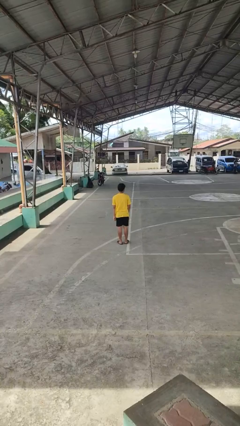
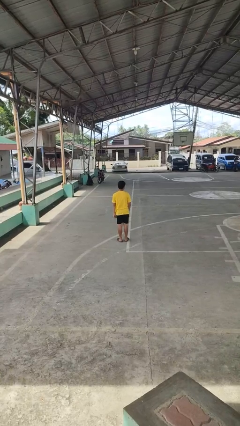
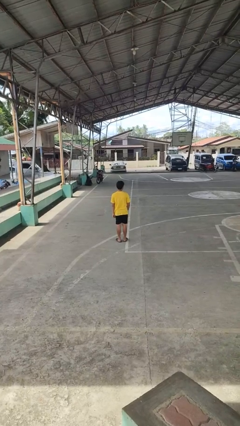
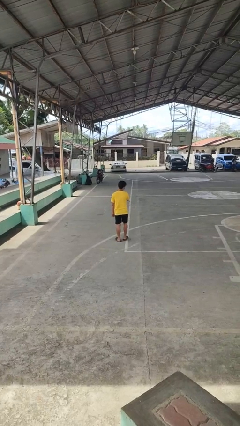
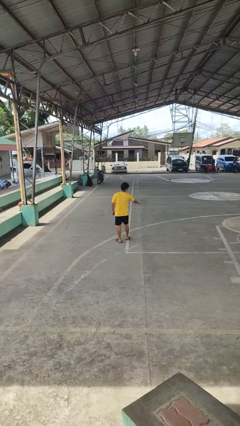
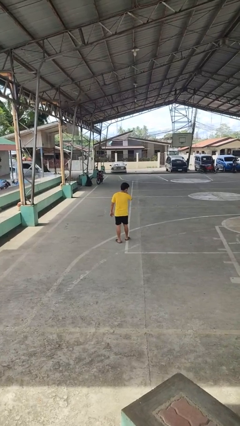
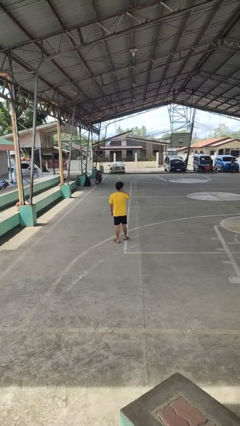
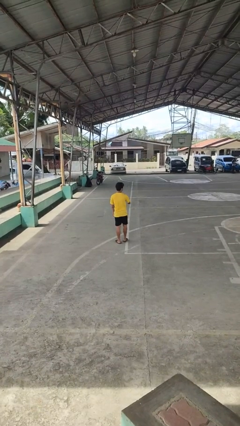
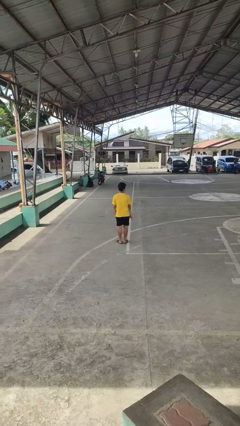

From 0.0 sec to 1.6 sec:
person karate chop

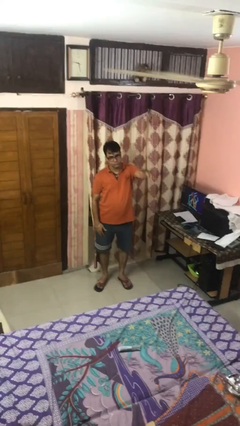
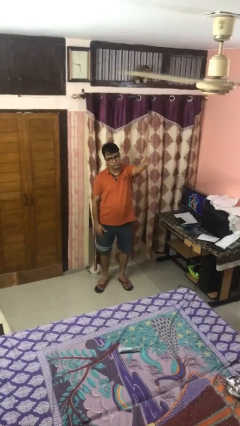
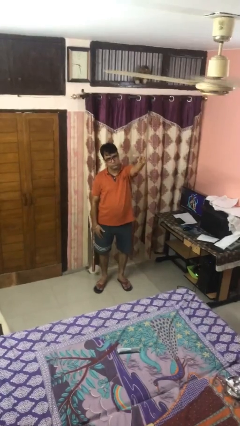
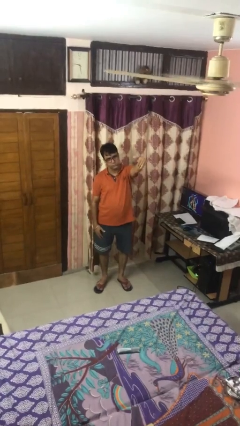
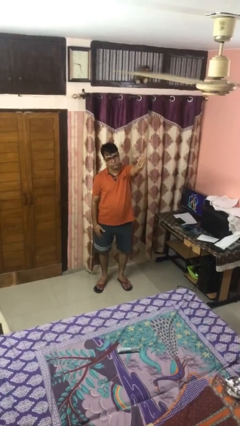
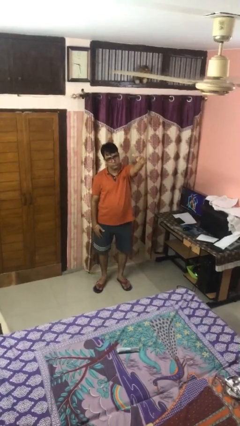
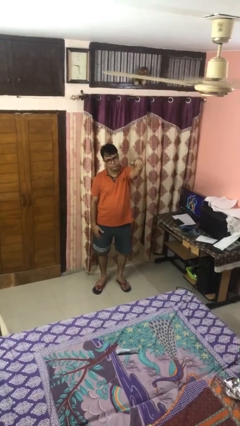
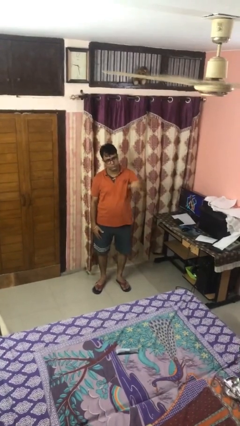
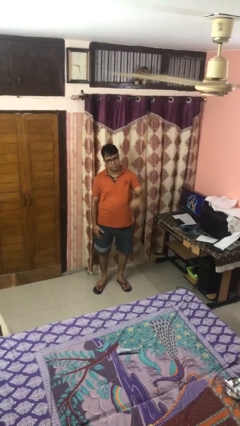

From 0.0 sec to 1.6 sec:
person gestures come here

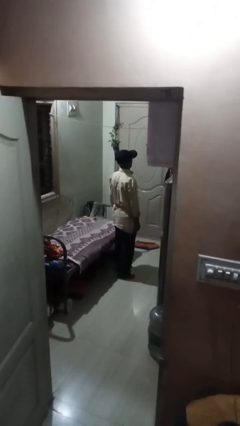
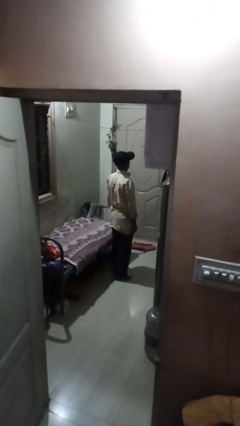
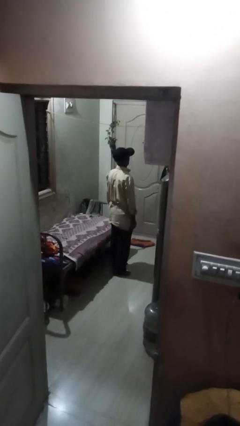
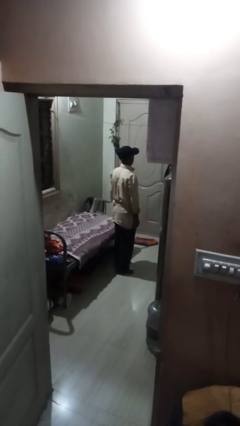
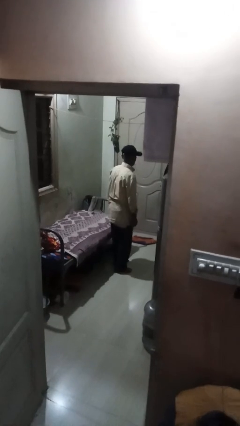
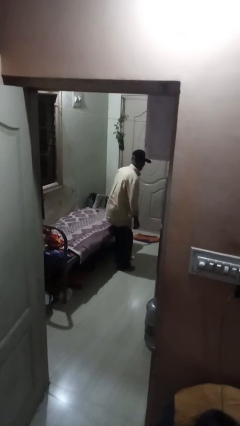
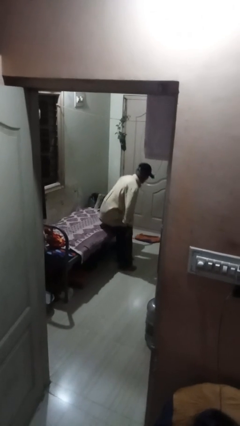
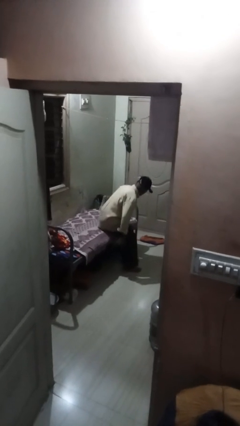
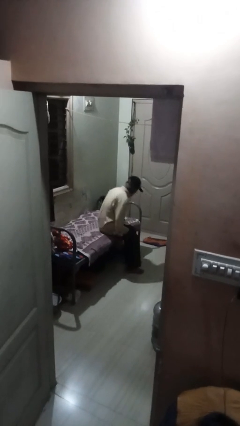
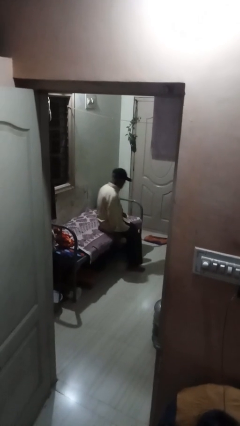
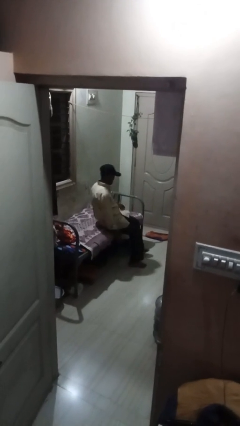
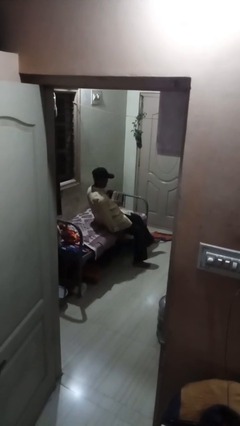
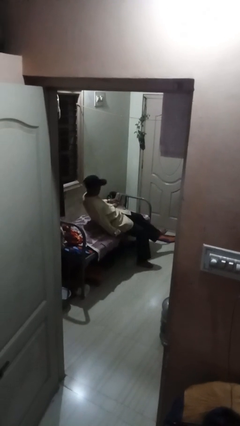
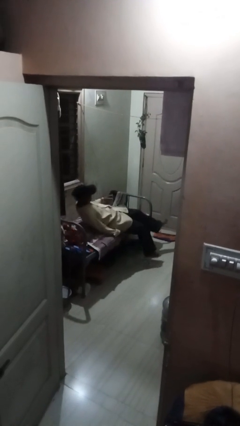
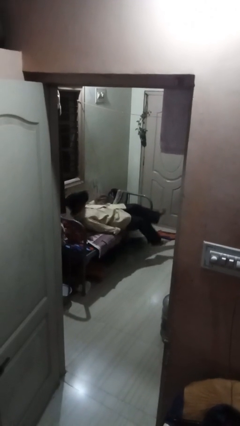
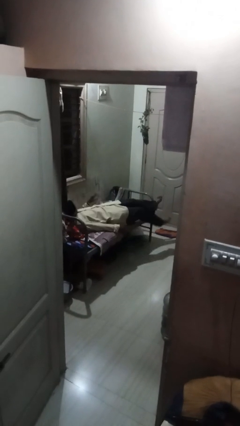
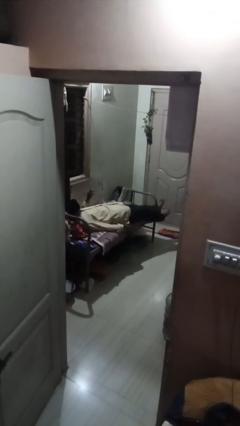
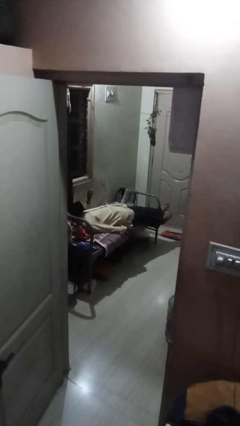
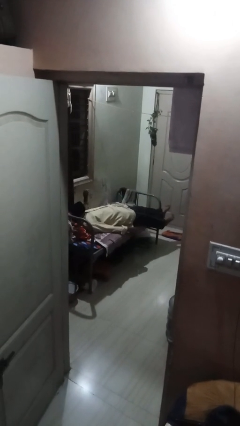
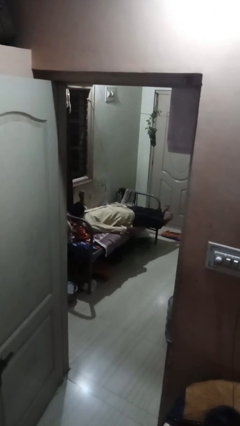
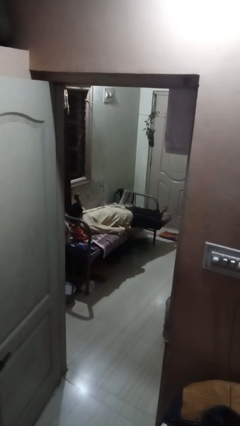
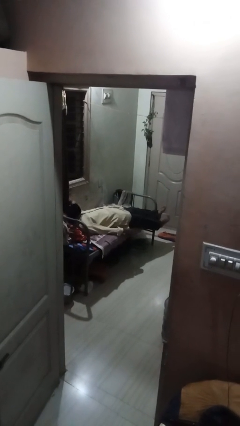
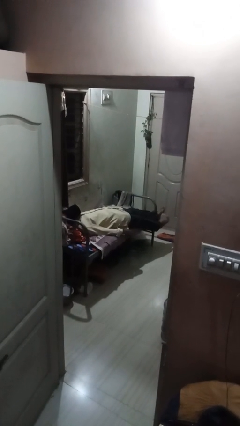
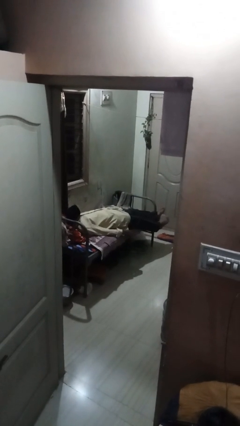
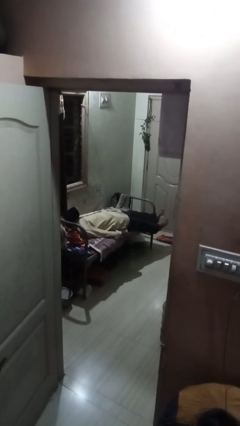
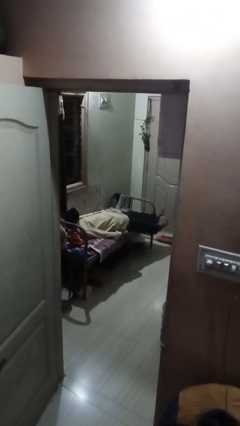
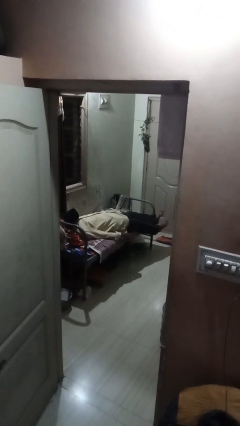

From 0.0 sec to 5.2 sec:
person lies down on bed

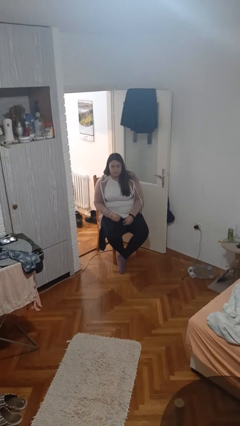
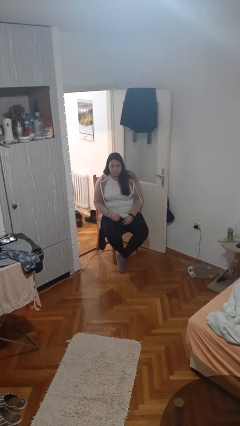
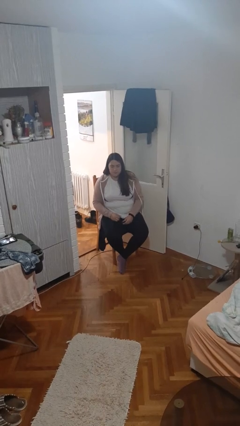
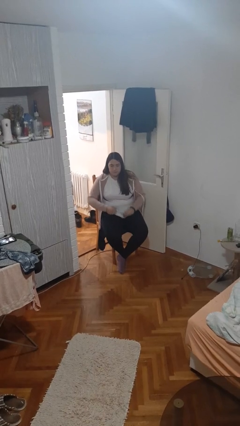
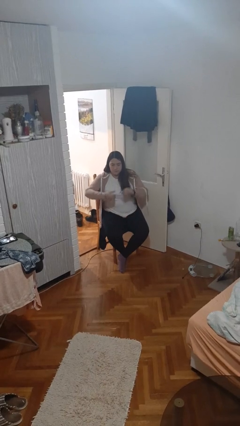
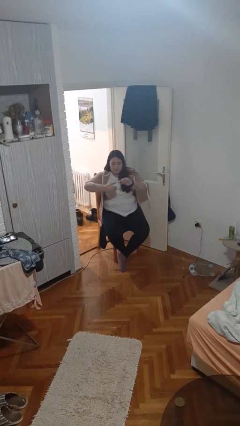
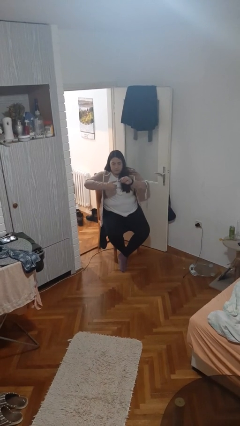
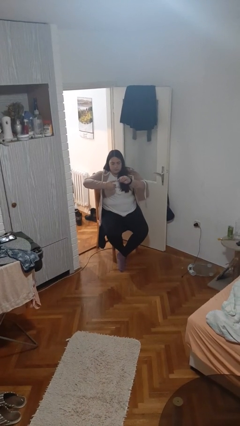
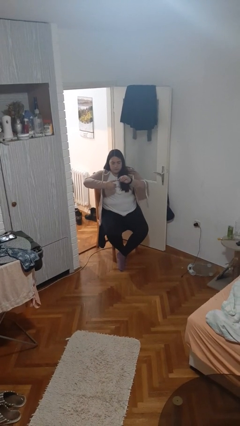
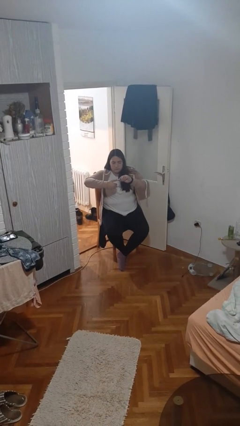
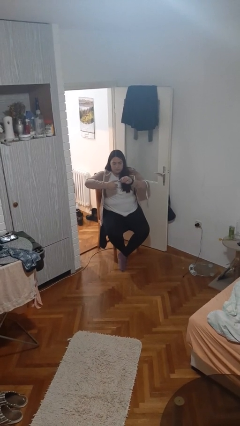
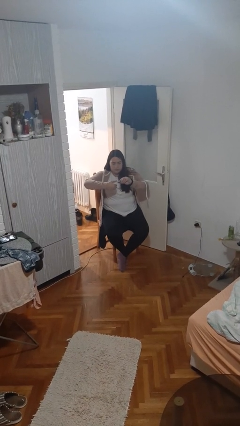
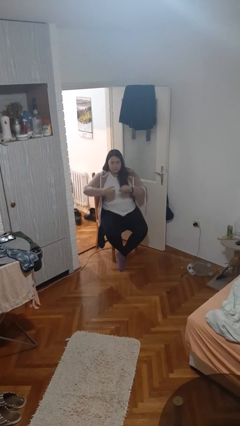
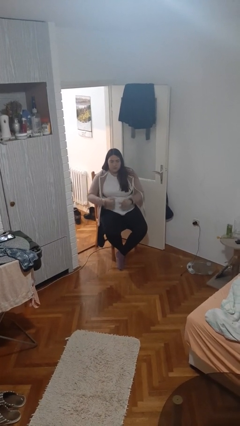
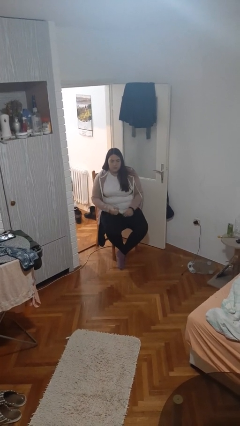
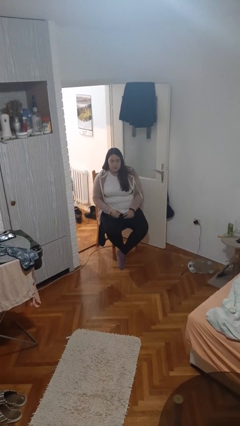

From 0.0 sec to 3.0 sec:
person clips fingernails

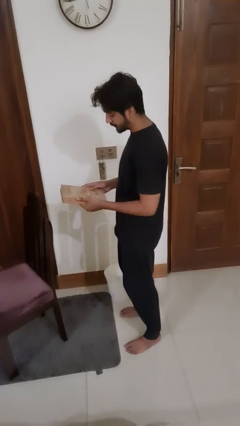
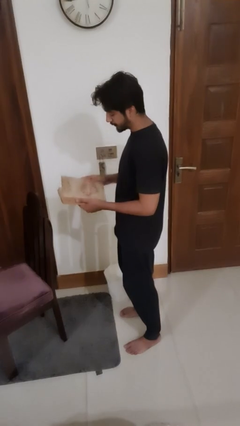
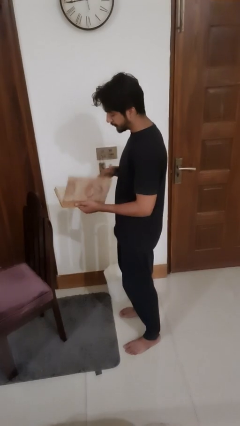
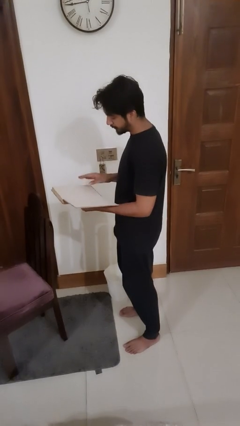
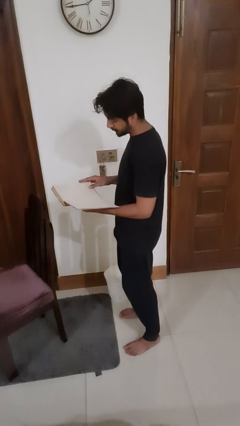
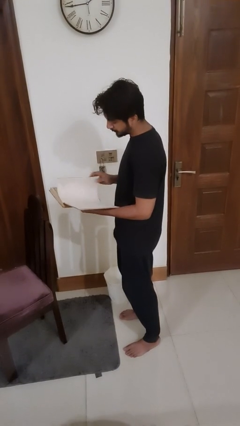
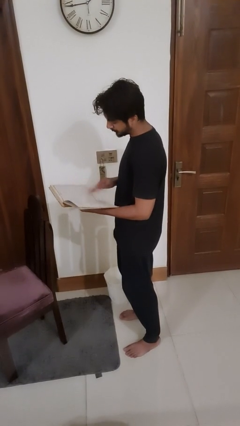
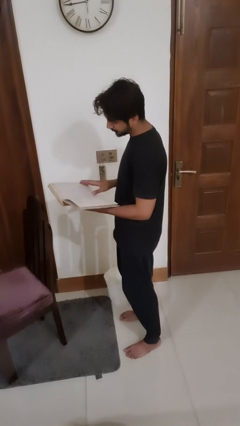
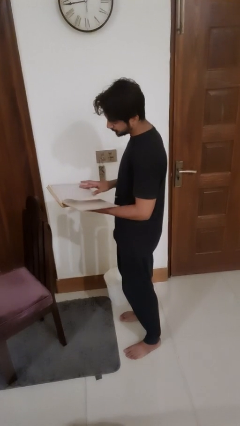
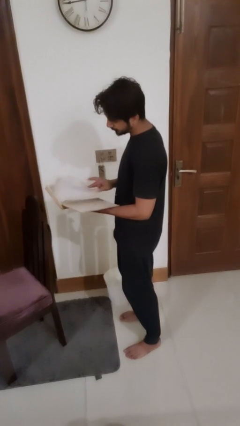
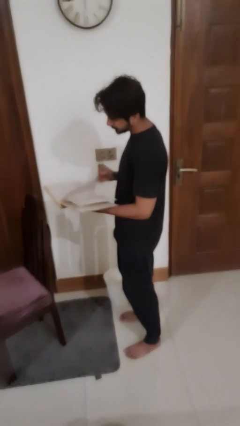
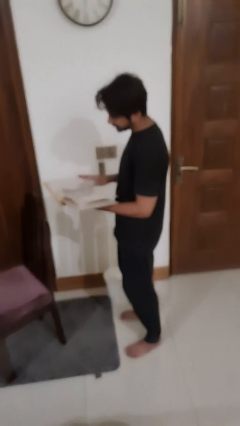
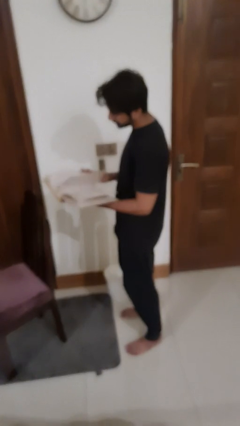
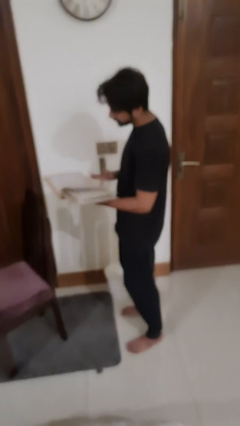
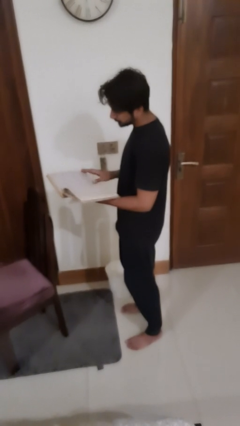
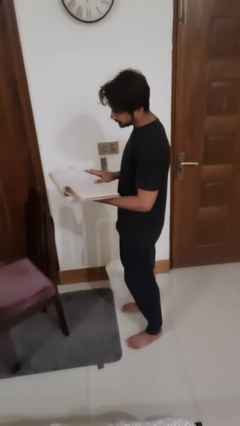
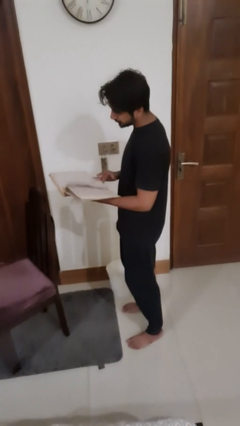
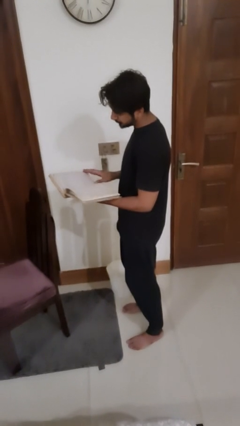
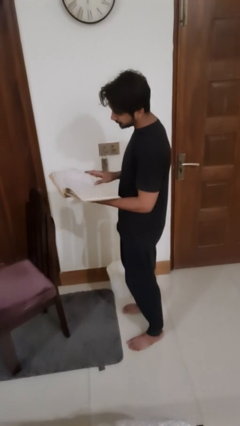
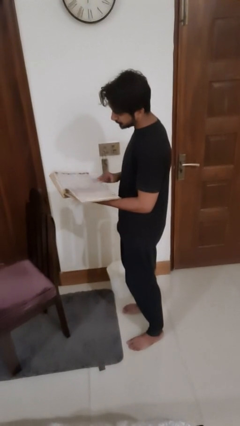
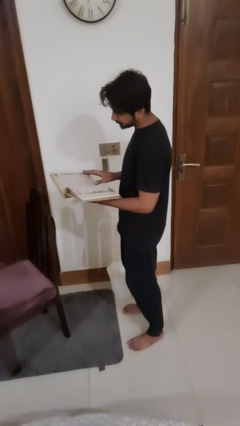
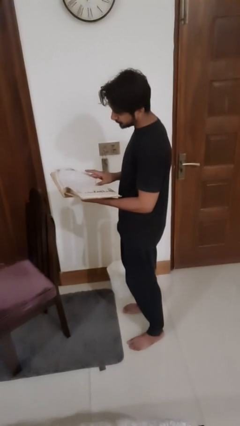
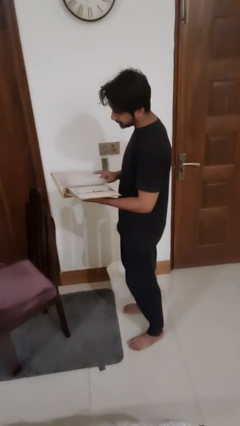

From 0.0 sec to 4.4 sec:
person reads book

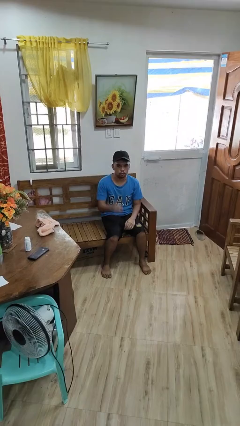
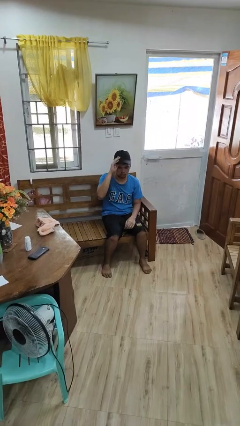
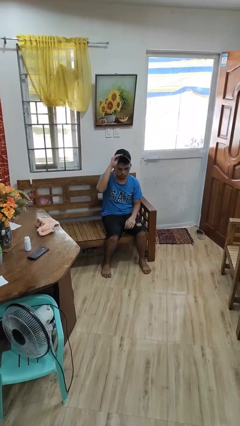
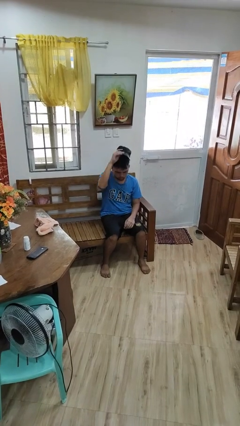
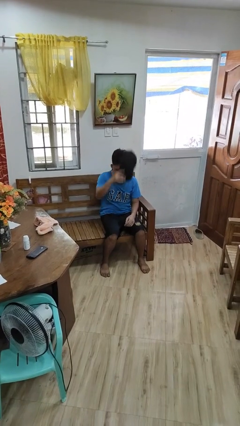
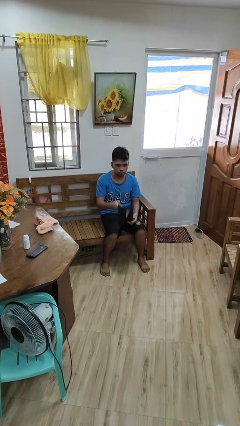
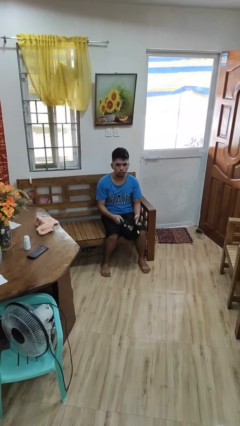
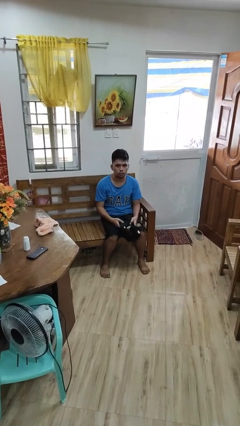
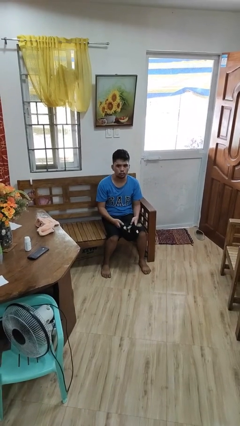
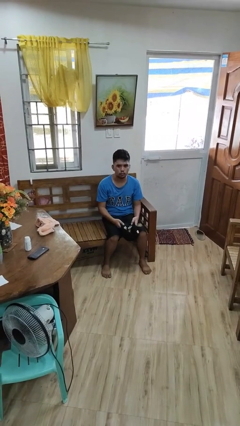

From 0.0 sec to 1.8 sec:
person takes off hat
